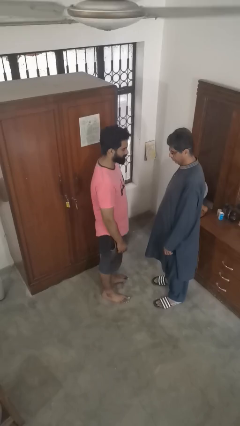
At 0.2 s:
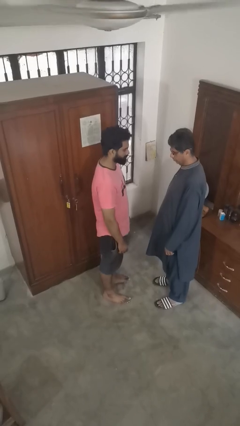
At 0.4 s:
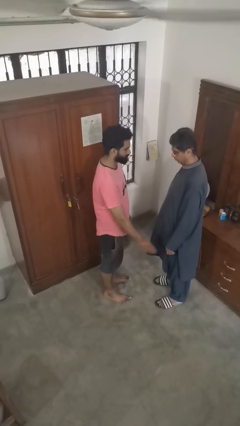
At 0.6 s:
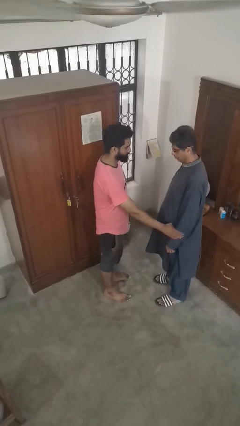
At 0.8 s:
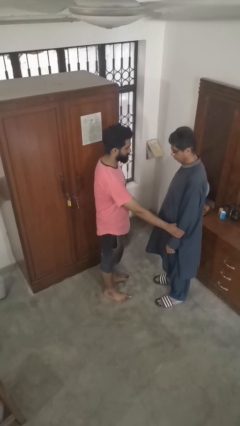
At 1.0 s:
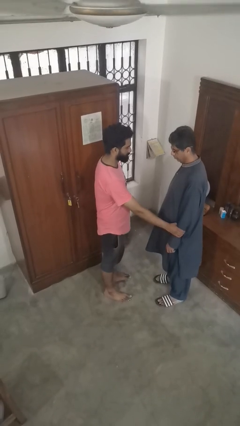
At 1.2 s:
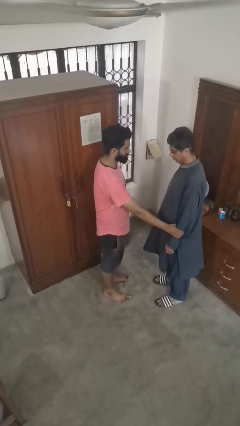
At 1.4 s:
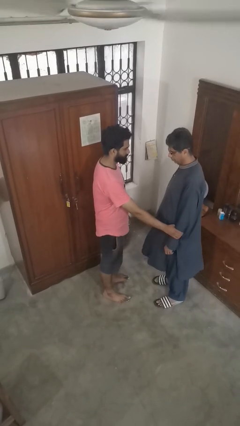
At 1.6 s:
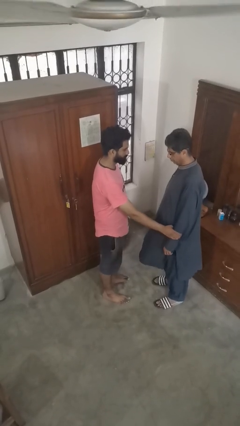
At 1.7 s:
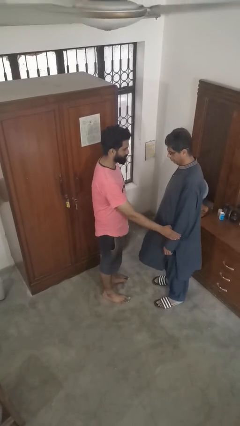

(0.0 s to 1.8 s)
person grabs person by forearm

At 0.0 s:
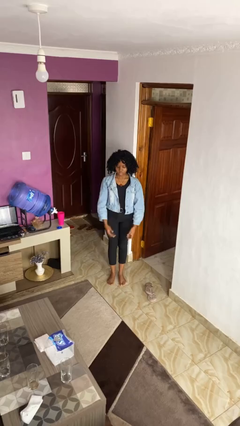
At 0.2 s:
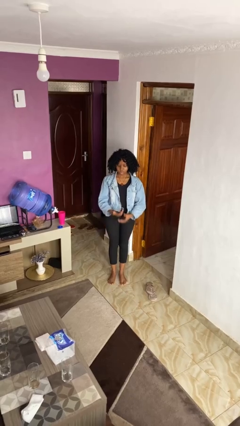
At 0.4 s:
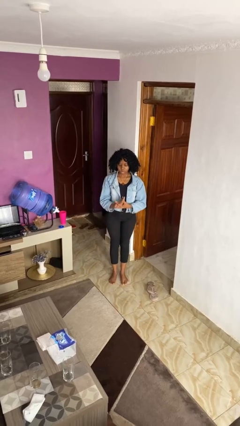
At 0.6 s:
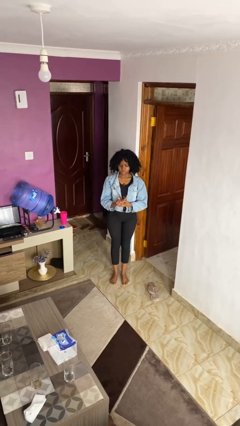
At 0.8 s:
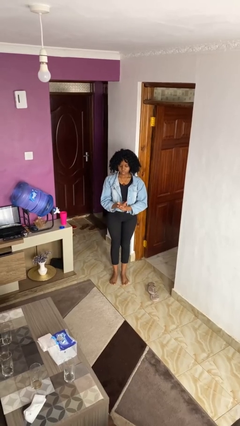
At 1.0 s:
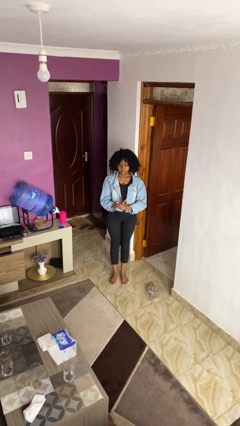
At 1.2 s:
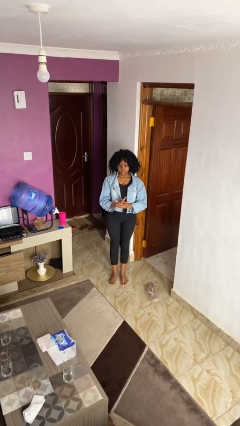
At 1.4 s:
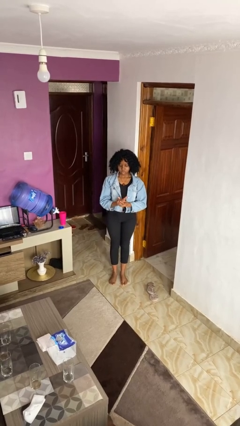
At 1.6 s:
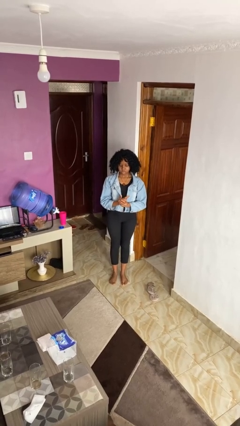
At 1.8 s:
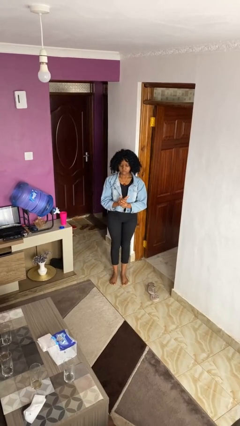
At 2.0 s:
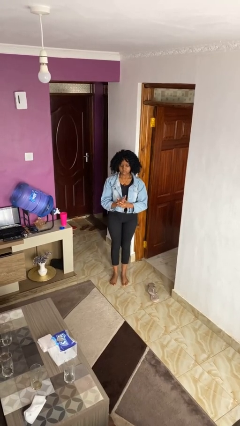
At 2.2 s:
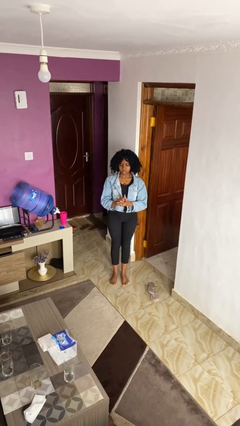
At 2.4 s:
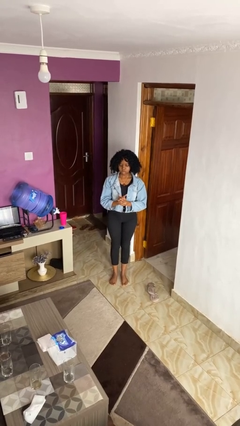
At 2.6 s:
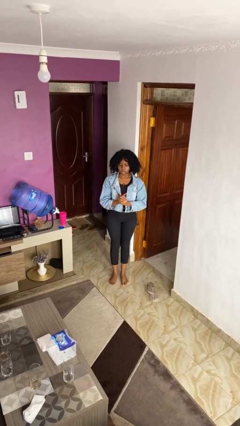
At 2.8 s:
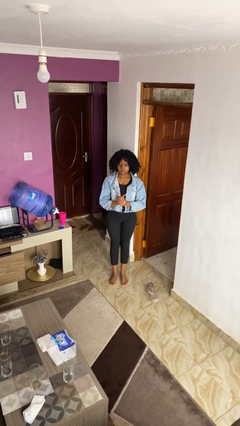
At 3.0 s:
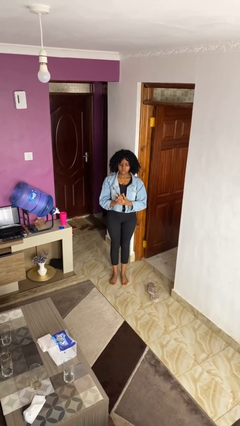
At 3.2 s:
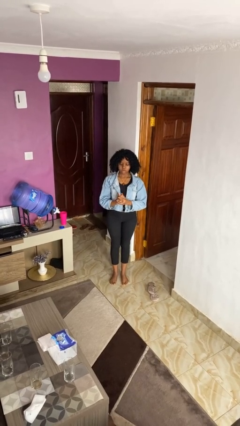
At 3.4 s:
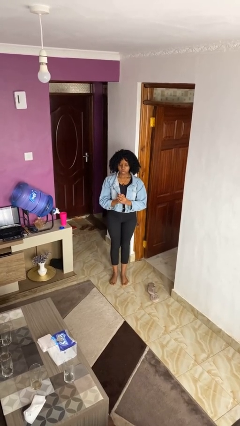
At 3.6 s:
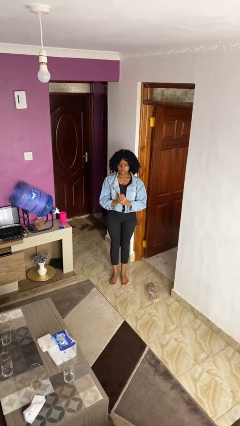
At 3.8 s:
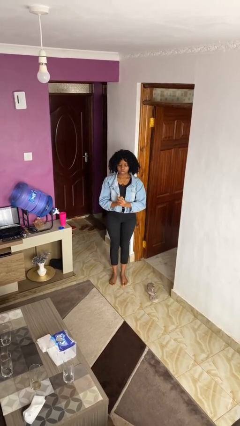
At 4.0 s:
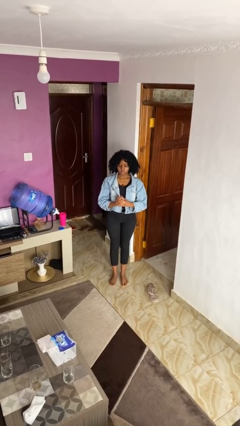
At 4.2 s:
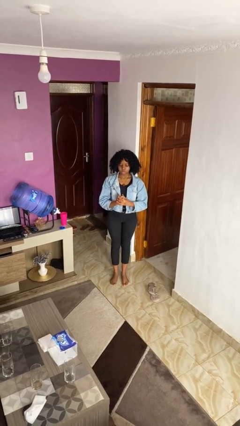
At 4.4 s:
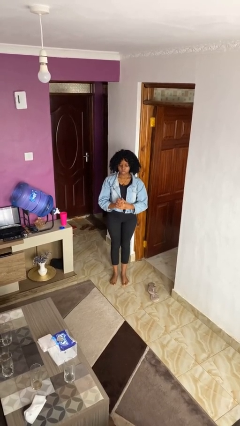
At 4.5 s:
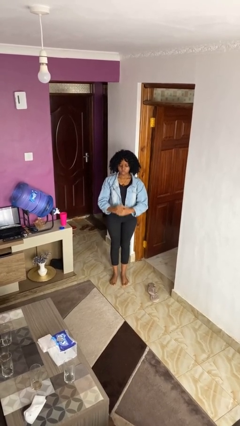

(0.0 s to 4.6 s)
person cracks knuckles

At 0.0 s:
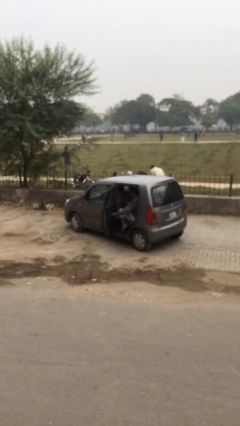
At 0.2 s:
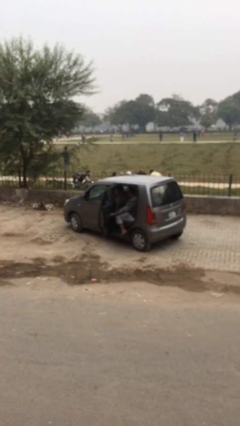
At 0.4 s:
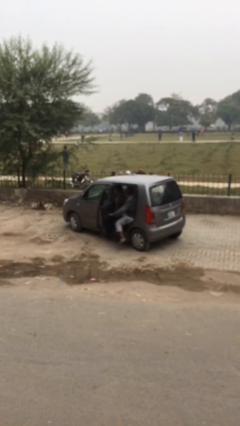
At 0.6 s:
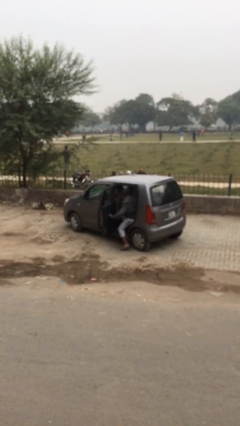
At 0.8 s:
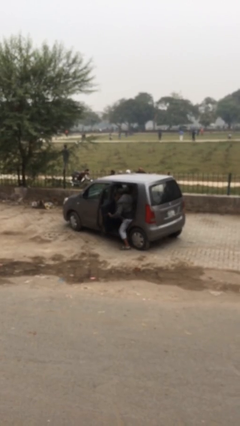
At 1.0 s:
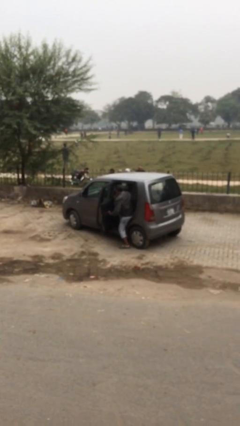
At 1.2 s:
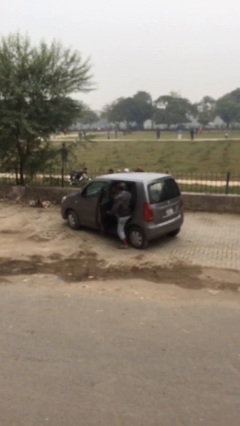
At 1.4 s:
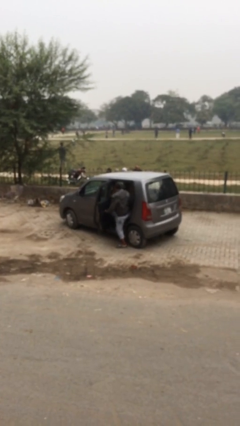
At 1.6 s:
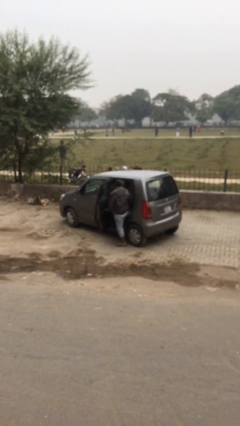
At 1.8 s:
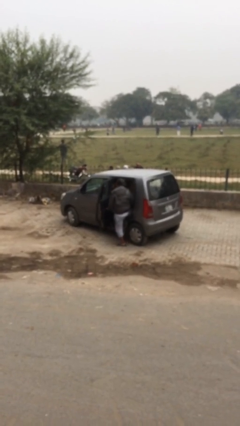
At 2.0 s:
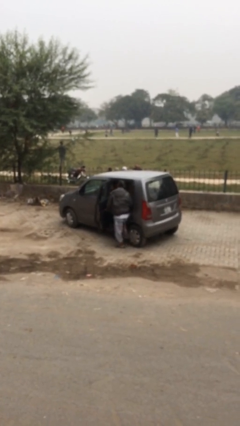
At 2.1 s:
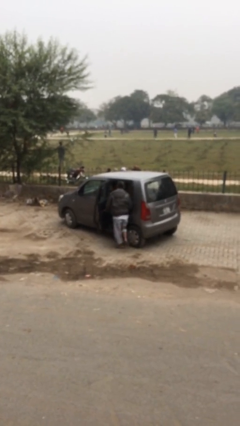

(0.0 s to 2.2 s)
person exits car

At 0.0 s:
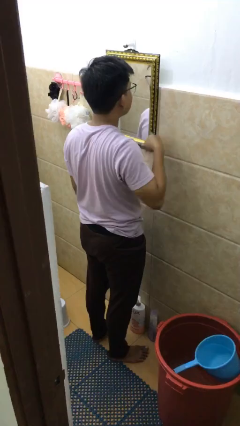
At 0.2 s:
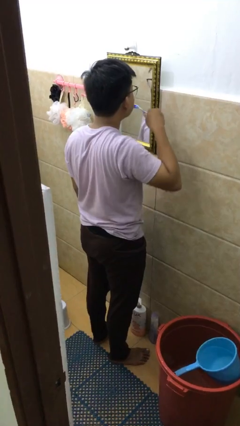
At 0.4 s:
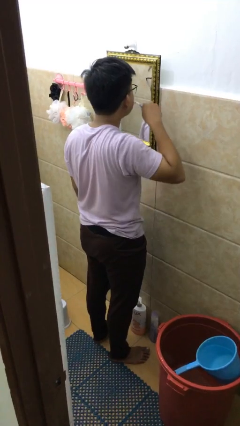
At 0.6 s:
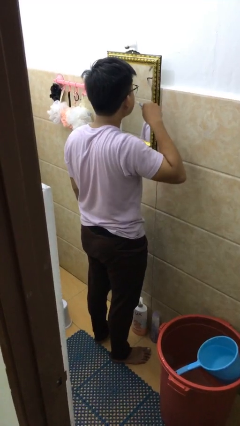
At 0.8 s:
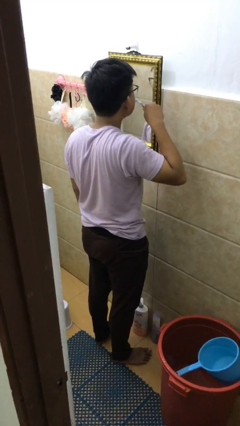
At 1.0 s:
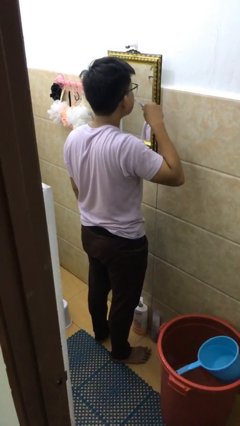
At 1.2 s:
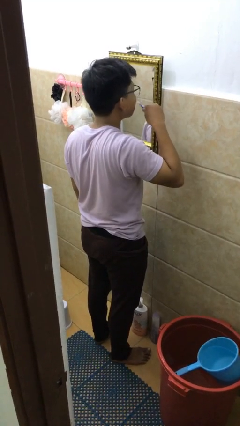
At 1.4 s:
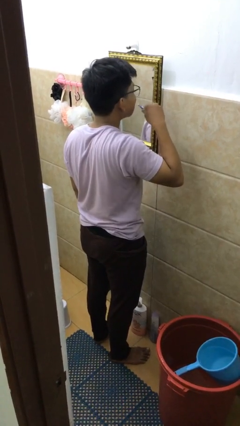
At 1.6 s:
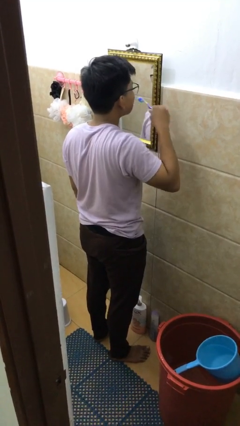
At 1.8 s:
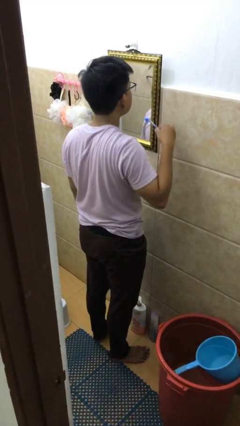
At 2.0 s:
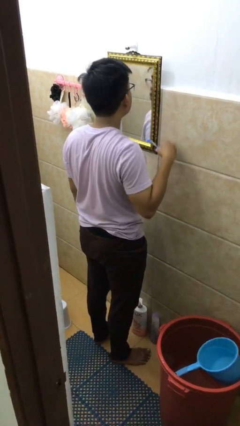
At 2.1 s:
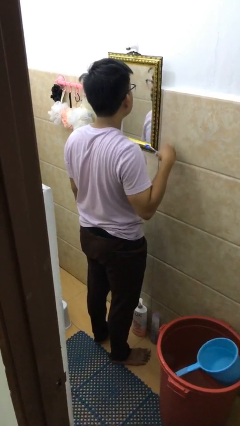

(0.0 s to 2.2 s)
person brushes teeth

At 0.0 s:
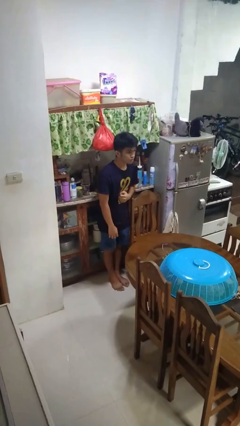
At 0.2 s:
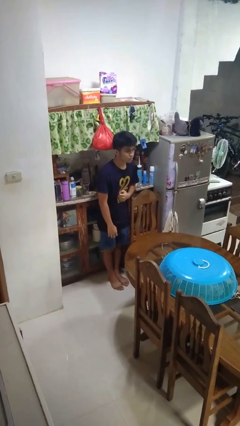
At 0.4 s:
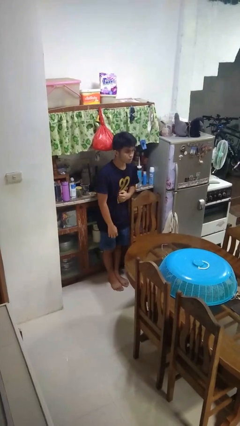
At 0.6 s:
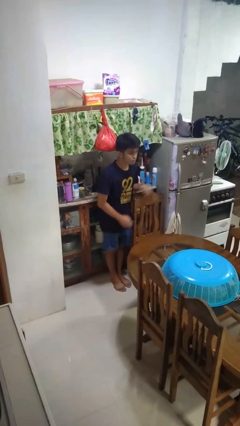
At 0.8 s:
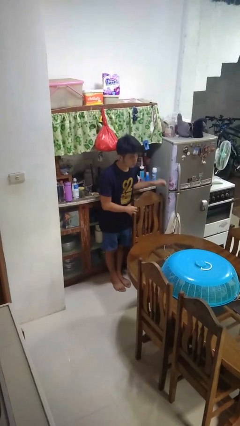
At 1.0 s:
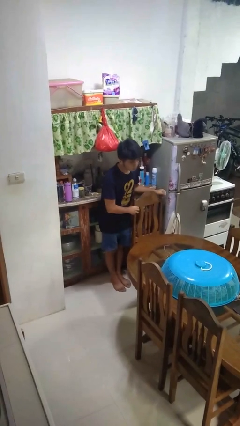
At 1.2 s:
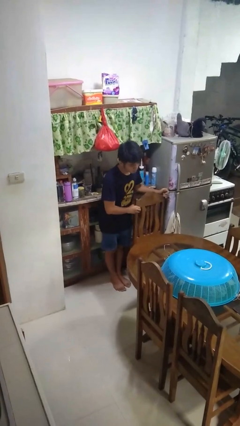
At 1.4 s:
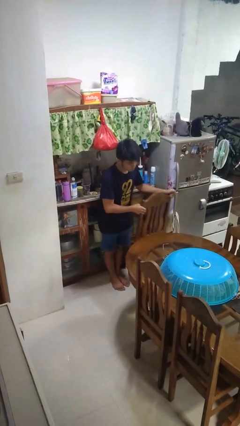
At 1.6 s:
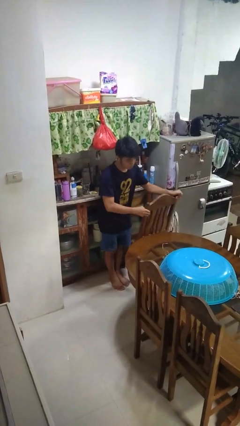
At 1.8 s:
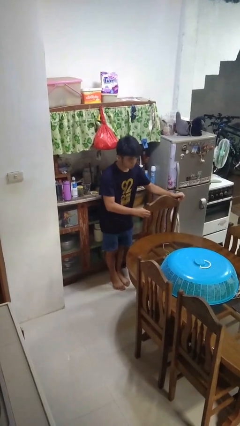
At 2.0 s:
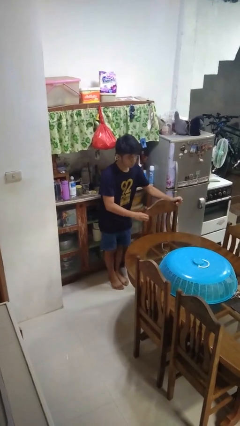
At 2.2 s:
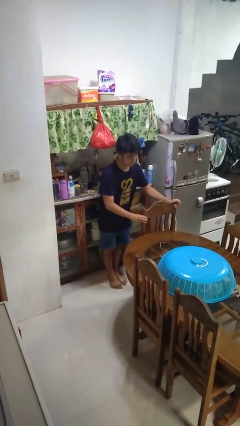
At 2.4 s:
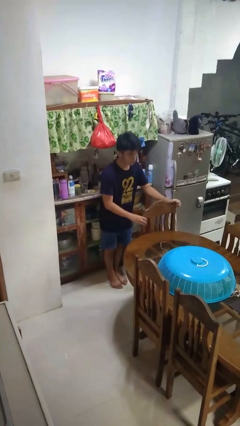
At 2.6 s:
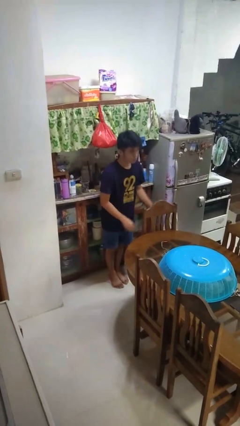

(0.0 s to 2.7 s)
person pushes in chair

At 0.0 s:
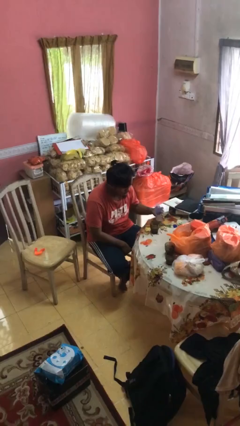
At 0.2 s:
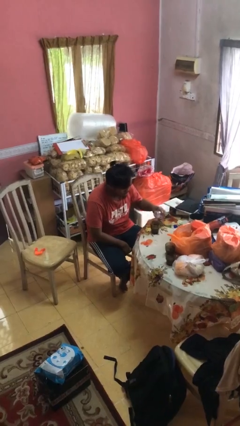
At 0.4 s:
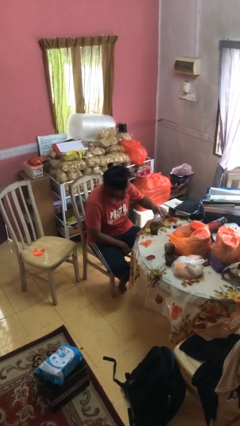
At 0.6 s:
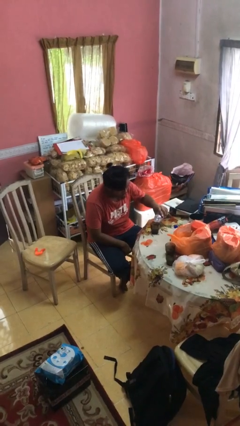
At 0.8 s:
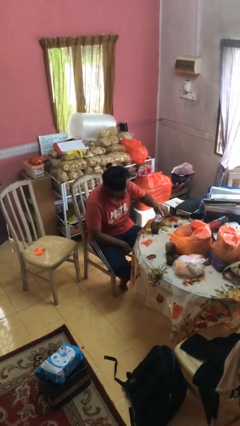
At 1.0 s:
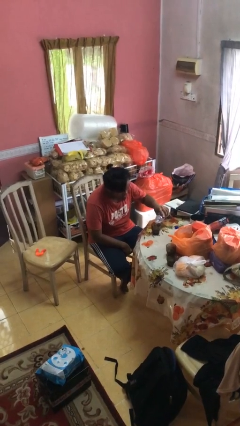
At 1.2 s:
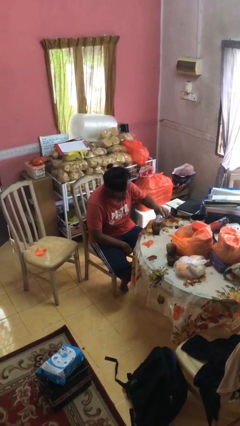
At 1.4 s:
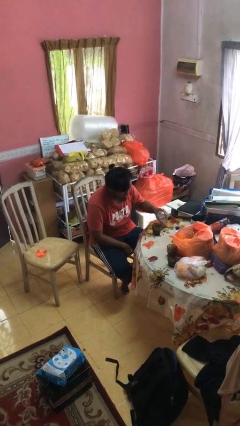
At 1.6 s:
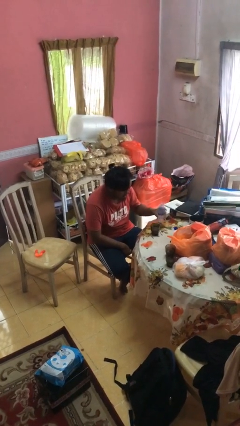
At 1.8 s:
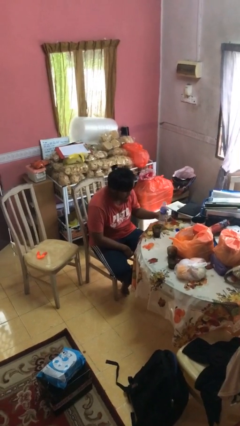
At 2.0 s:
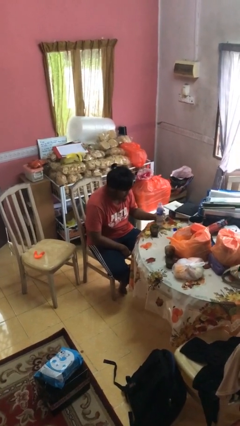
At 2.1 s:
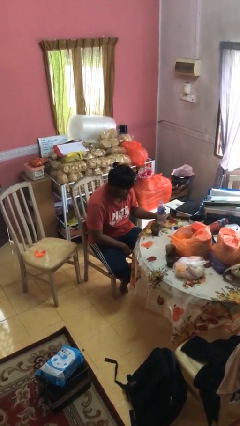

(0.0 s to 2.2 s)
person pours liquid into cup

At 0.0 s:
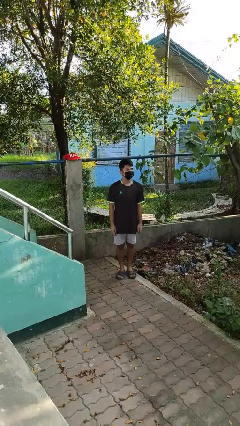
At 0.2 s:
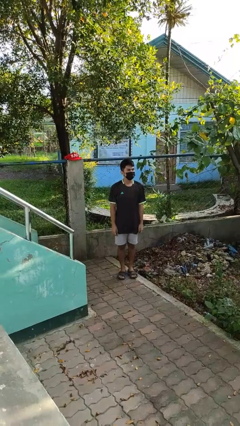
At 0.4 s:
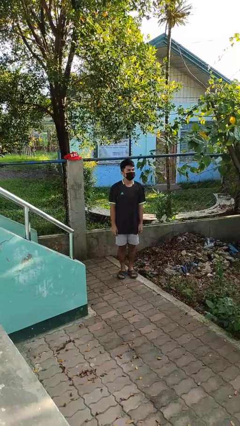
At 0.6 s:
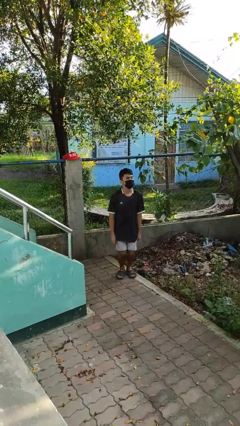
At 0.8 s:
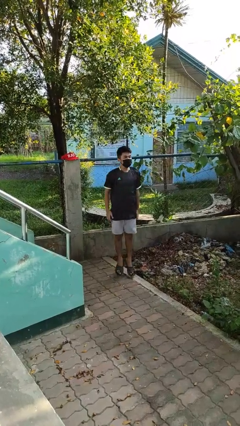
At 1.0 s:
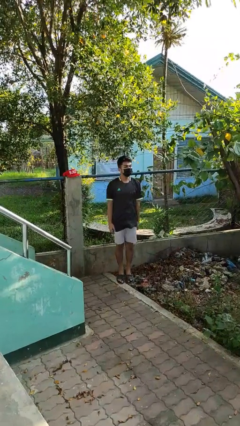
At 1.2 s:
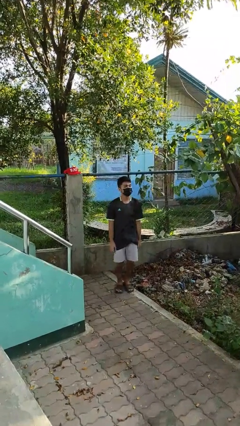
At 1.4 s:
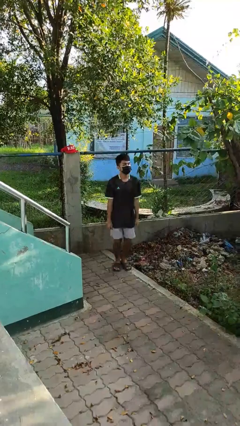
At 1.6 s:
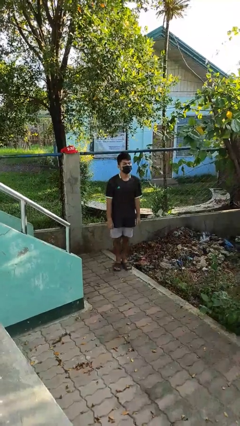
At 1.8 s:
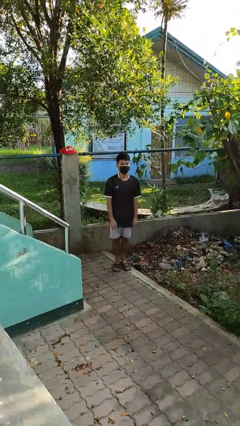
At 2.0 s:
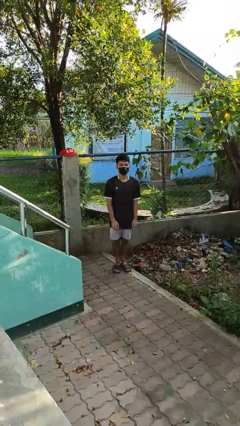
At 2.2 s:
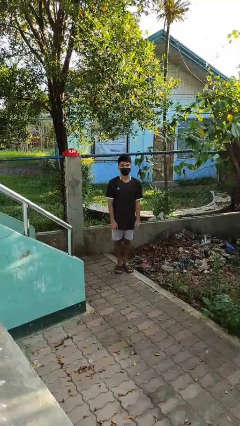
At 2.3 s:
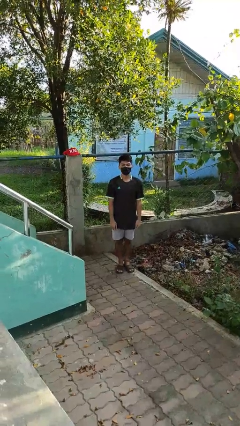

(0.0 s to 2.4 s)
person jumps
